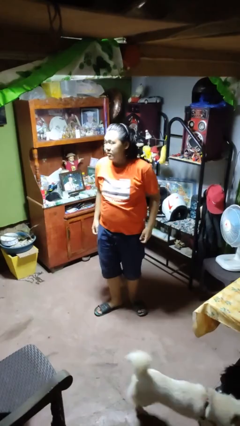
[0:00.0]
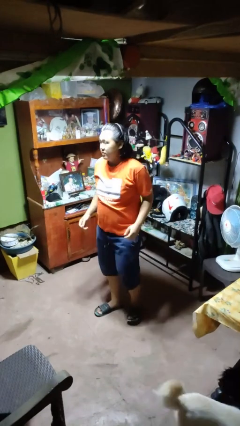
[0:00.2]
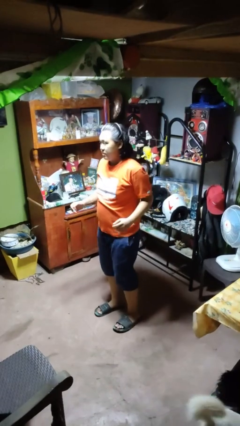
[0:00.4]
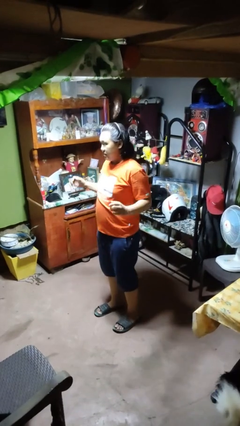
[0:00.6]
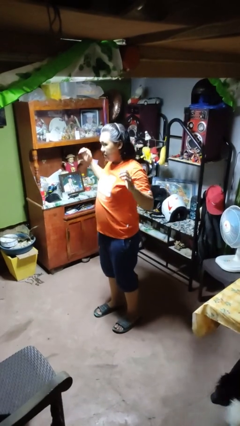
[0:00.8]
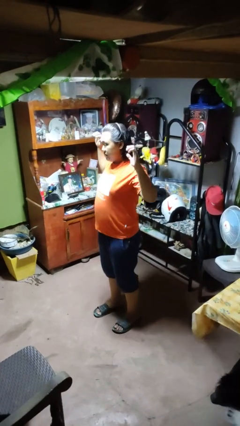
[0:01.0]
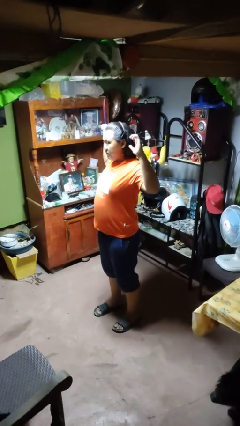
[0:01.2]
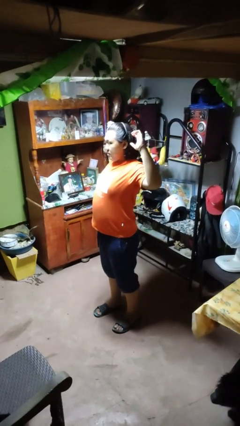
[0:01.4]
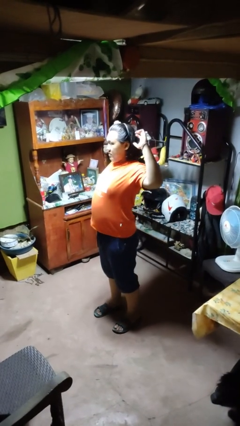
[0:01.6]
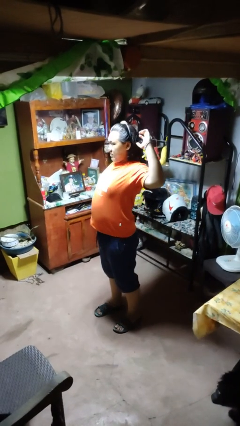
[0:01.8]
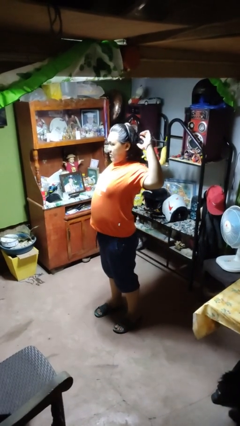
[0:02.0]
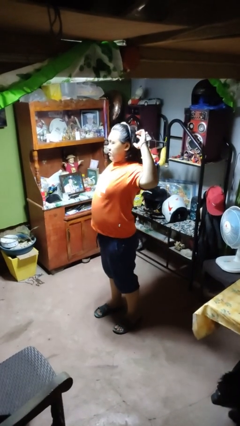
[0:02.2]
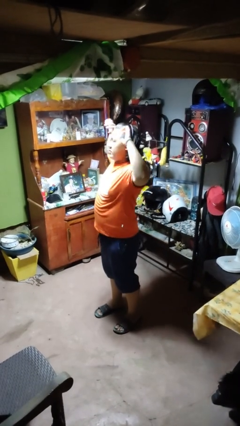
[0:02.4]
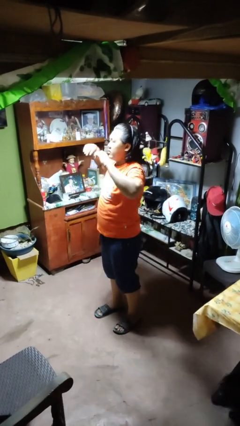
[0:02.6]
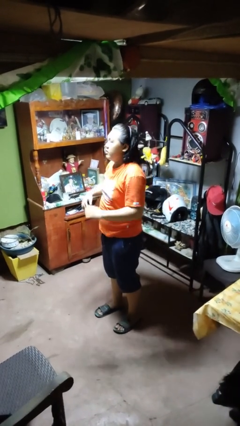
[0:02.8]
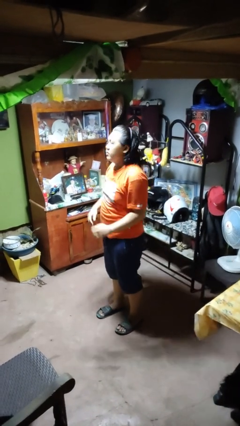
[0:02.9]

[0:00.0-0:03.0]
person stretches arms to side

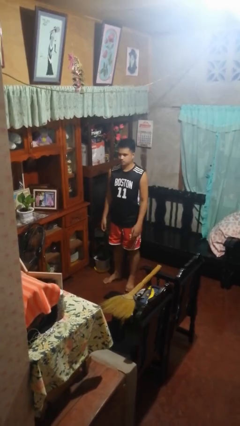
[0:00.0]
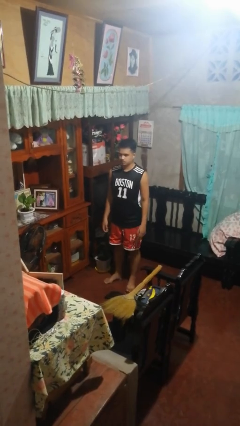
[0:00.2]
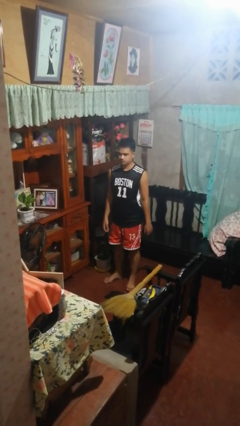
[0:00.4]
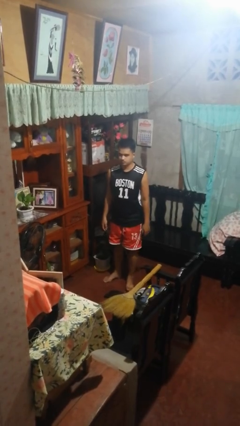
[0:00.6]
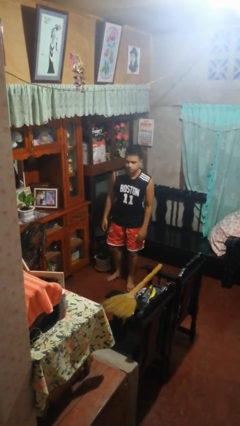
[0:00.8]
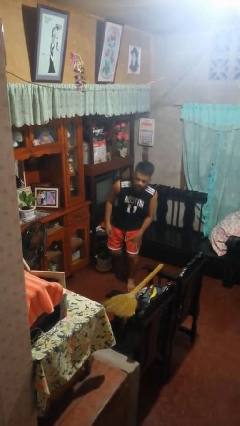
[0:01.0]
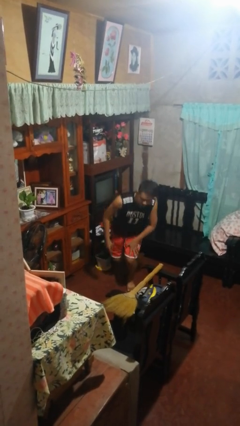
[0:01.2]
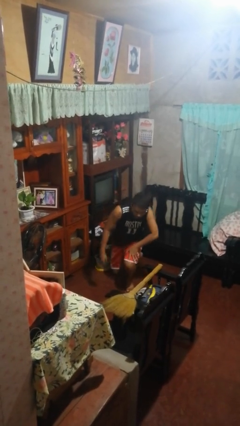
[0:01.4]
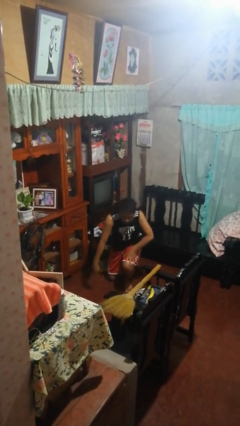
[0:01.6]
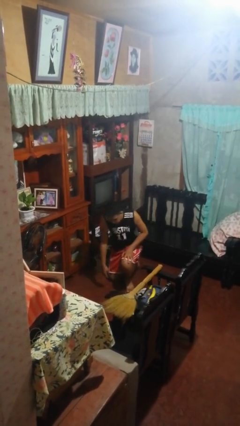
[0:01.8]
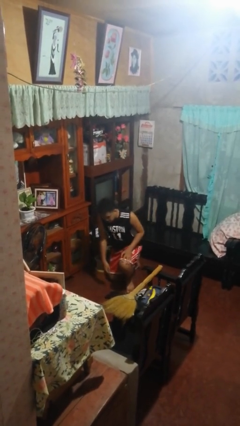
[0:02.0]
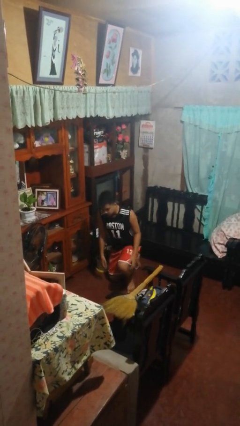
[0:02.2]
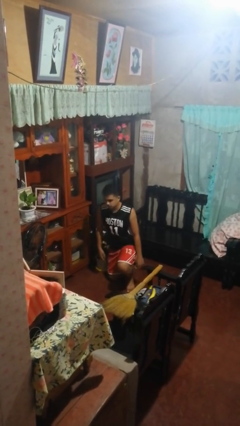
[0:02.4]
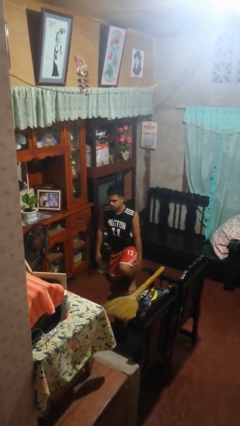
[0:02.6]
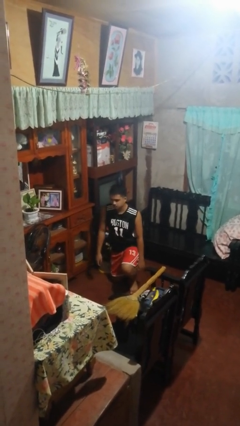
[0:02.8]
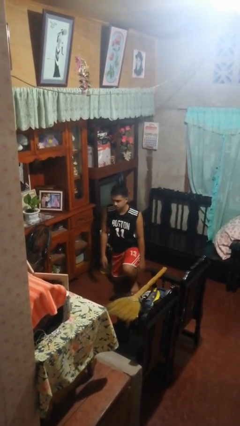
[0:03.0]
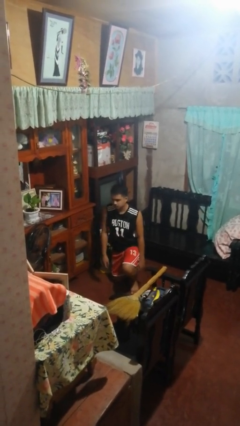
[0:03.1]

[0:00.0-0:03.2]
person kneels

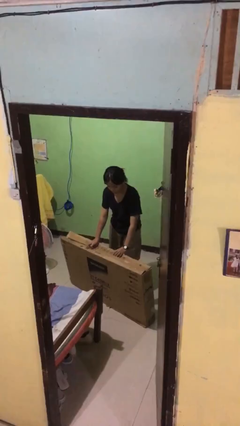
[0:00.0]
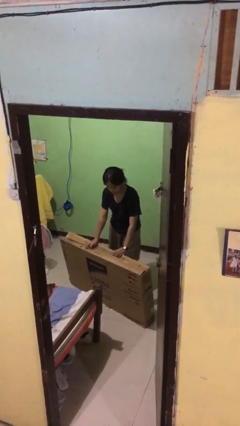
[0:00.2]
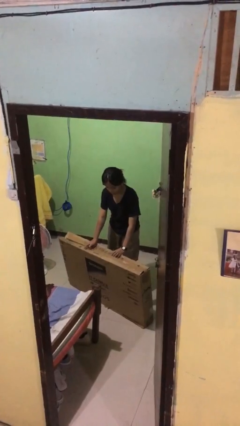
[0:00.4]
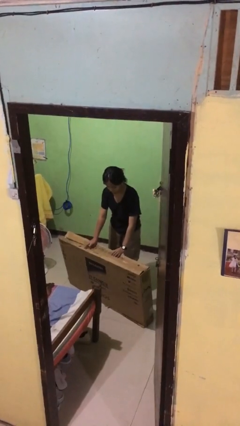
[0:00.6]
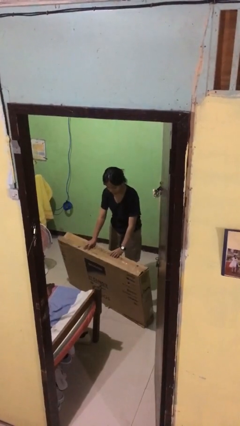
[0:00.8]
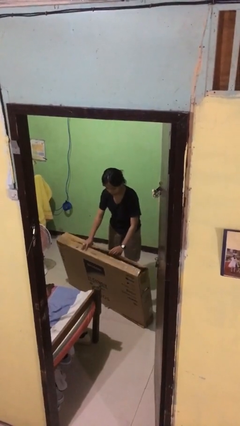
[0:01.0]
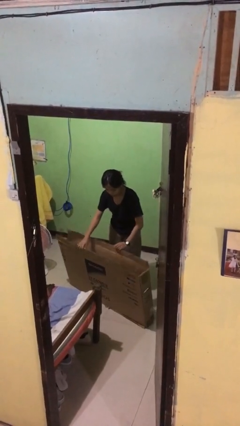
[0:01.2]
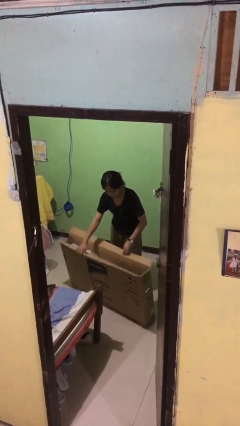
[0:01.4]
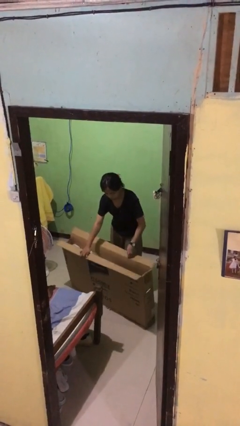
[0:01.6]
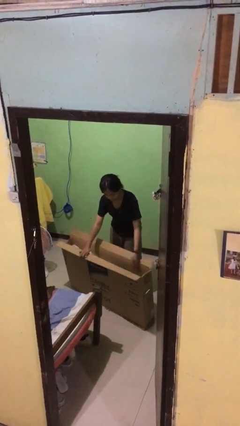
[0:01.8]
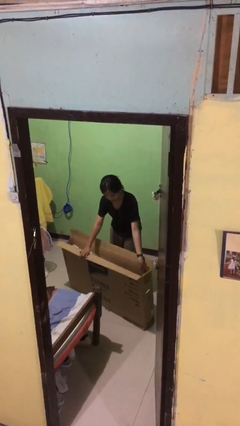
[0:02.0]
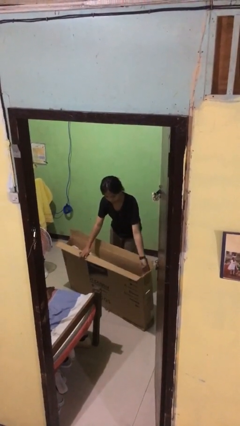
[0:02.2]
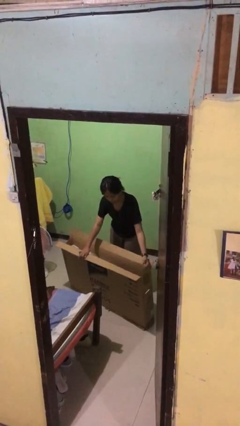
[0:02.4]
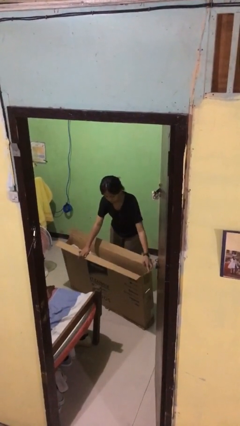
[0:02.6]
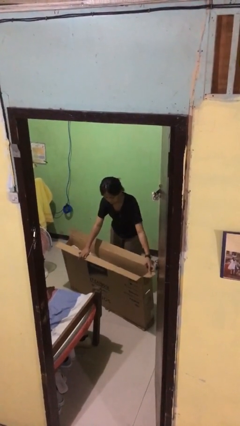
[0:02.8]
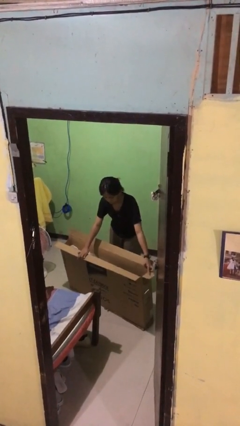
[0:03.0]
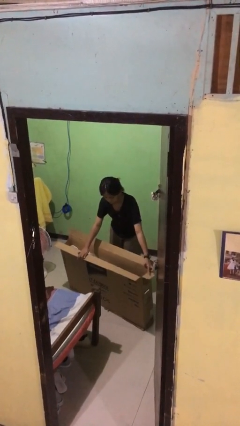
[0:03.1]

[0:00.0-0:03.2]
person opens box

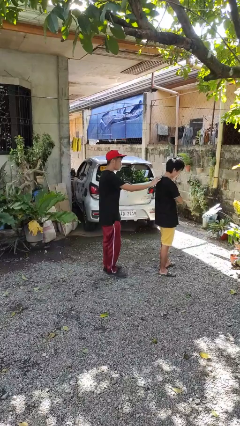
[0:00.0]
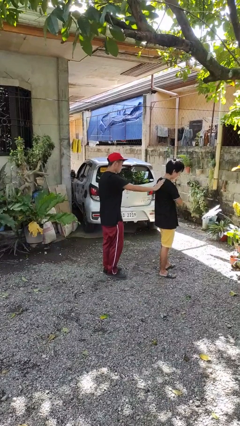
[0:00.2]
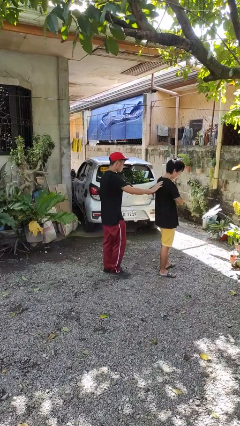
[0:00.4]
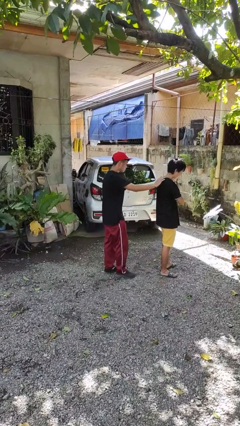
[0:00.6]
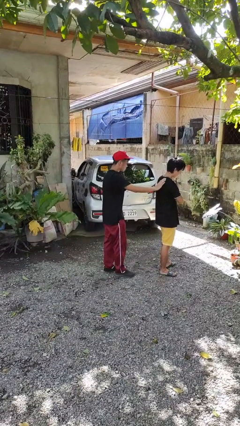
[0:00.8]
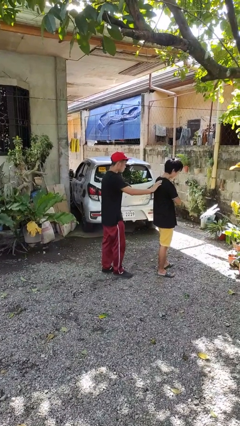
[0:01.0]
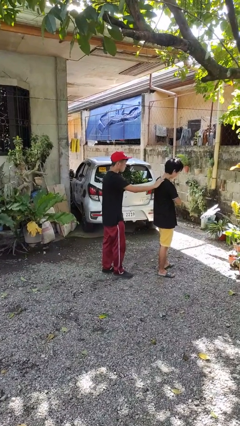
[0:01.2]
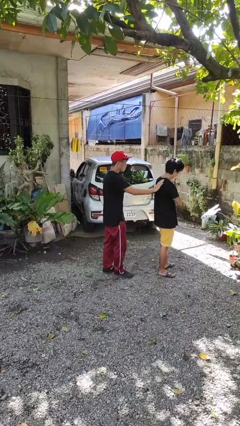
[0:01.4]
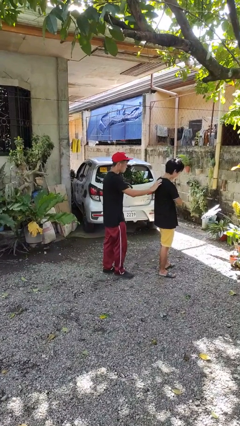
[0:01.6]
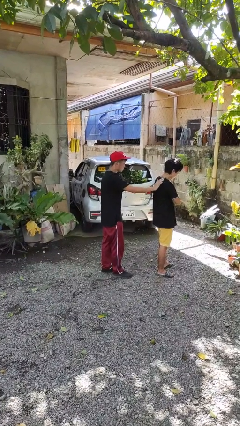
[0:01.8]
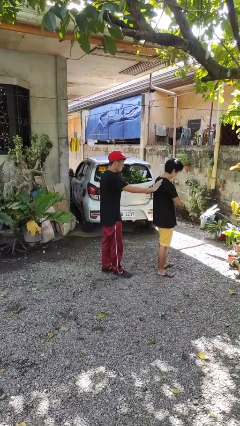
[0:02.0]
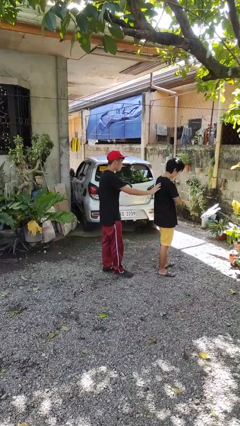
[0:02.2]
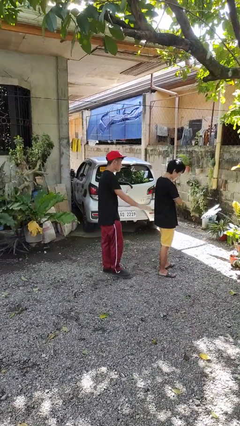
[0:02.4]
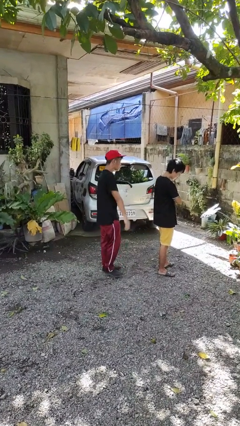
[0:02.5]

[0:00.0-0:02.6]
person touches back of person

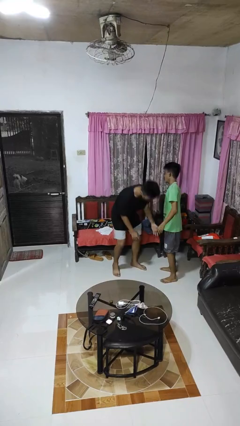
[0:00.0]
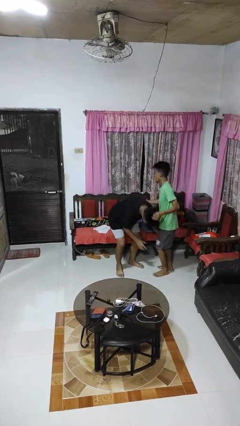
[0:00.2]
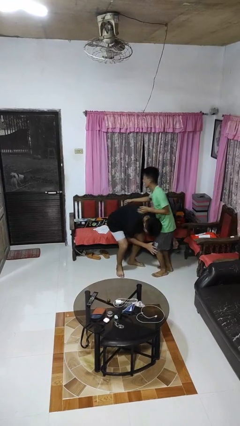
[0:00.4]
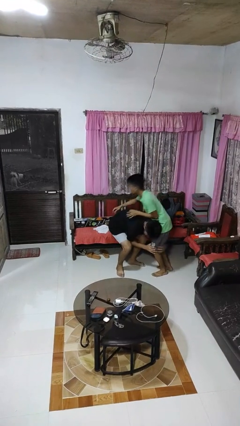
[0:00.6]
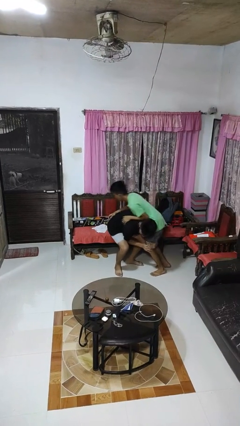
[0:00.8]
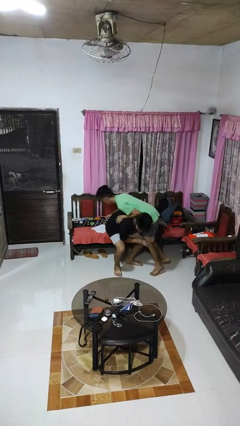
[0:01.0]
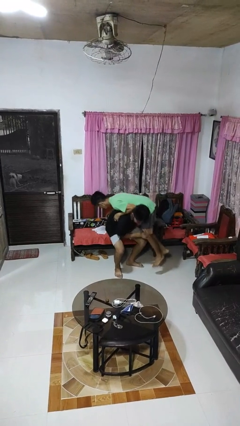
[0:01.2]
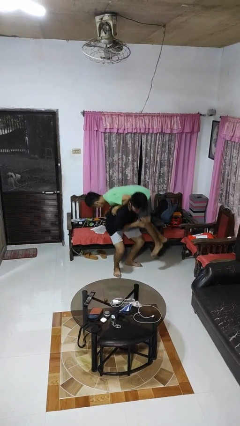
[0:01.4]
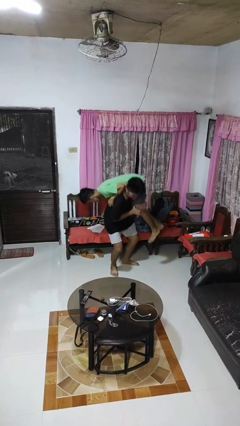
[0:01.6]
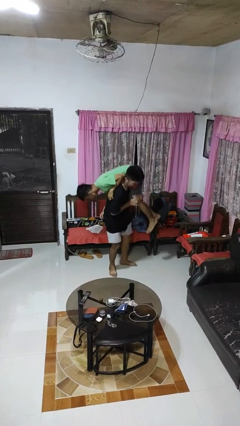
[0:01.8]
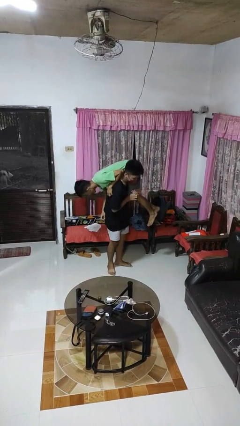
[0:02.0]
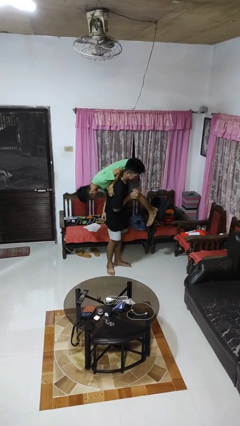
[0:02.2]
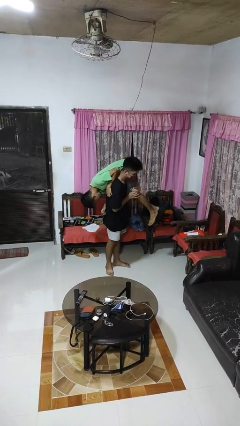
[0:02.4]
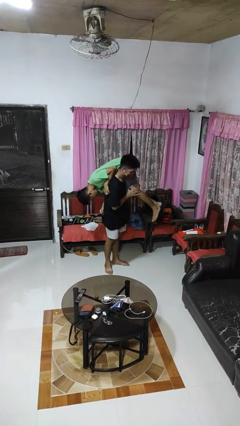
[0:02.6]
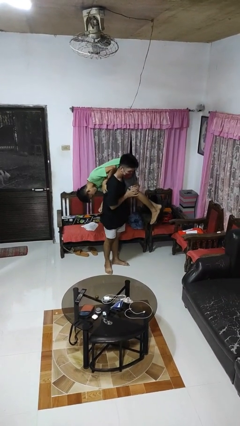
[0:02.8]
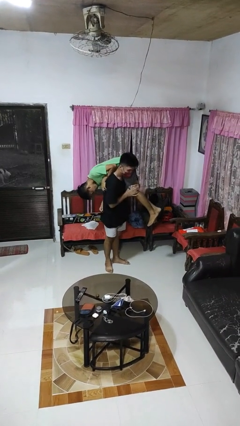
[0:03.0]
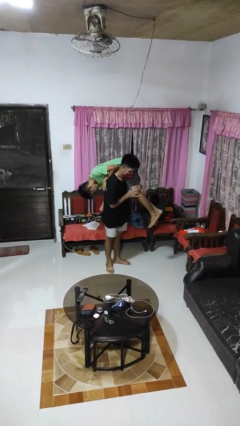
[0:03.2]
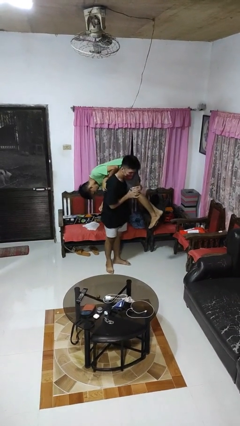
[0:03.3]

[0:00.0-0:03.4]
person carries person over shoulder

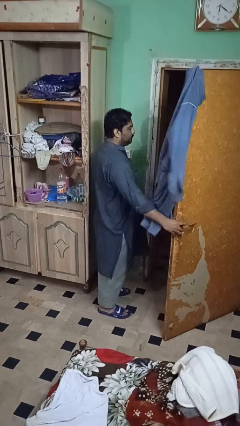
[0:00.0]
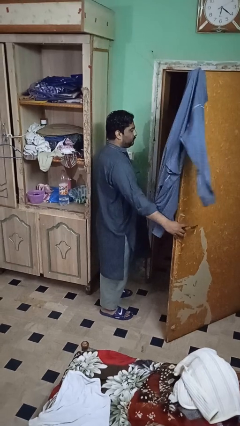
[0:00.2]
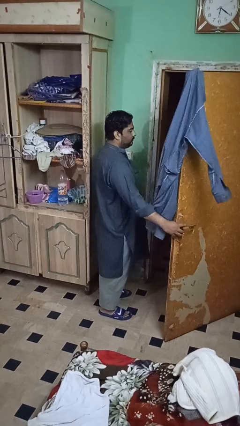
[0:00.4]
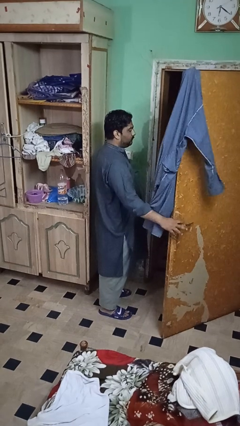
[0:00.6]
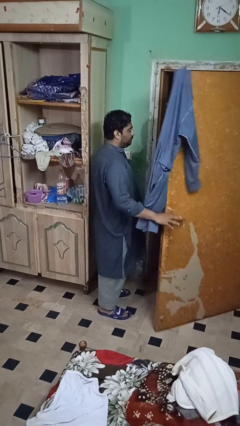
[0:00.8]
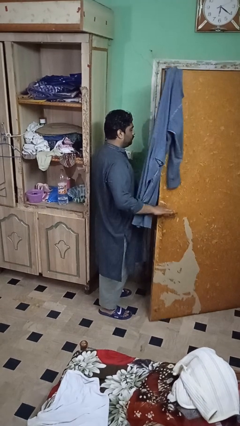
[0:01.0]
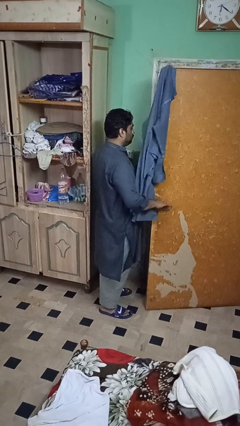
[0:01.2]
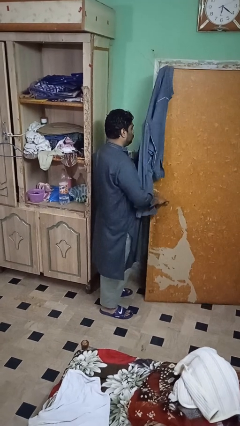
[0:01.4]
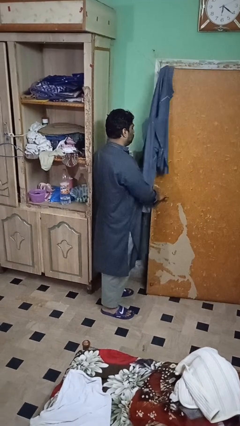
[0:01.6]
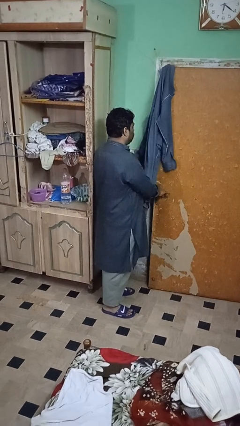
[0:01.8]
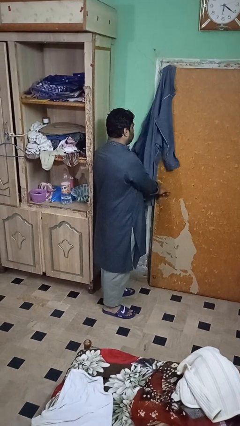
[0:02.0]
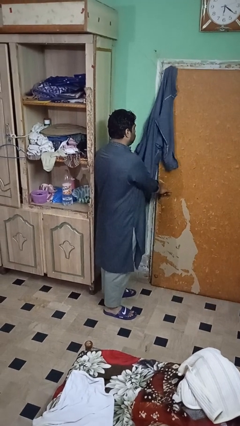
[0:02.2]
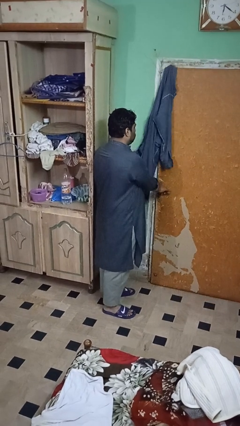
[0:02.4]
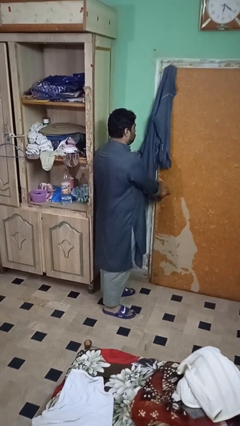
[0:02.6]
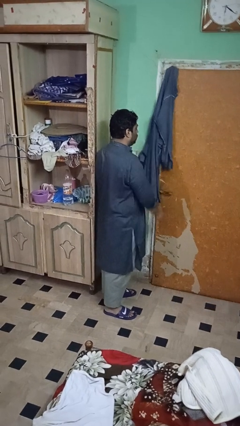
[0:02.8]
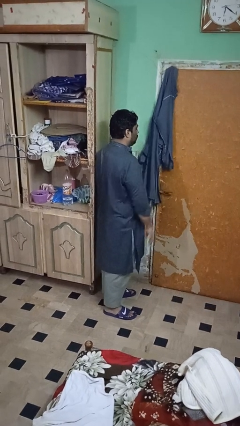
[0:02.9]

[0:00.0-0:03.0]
person closes closet door
